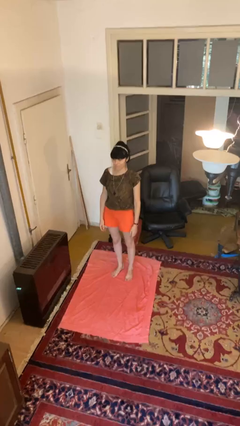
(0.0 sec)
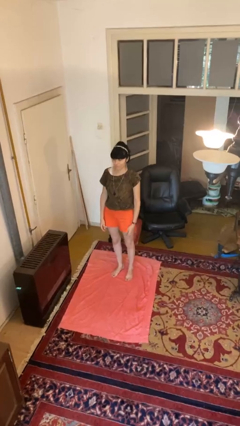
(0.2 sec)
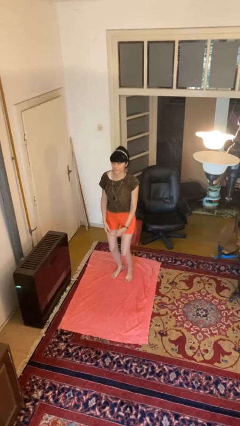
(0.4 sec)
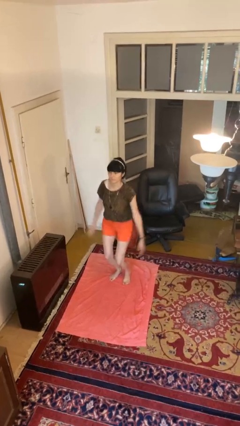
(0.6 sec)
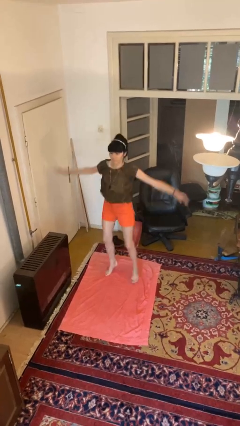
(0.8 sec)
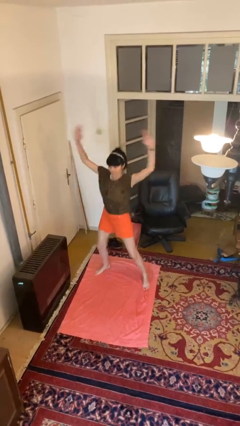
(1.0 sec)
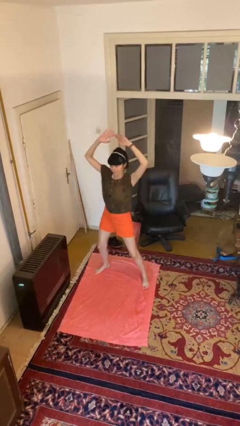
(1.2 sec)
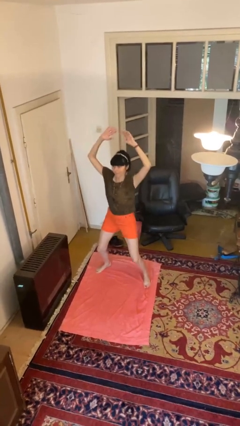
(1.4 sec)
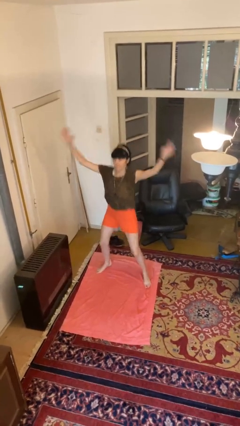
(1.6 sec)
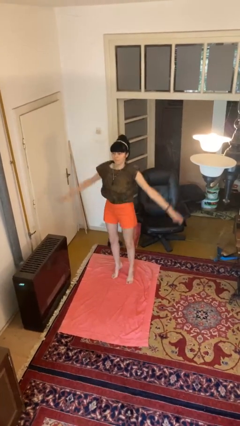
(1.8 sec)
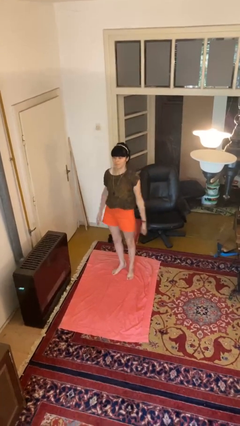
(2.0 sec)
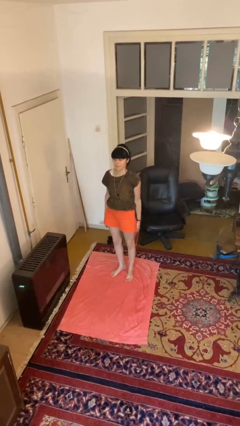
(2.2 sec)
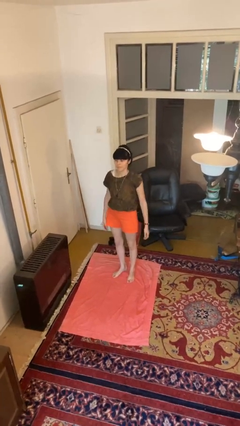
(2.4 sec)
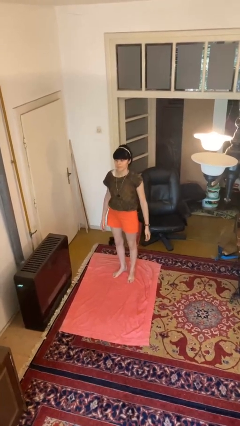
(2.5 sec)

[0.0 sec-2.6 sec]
person exercises with jumping jacks

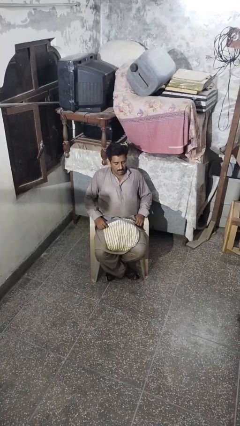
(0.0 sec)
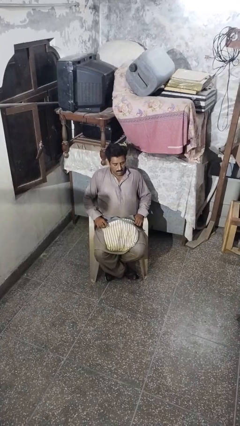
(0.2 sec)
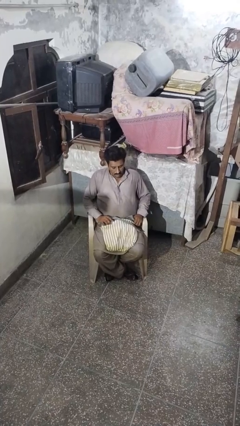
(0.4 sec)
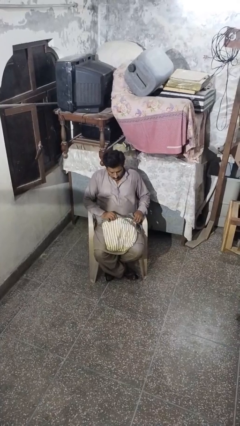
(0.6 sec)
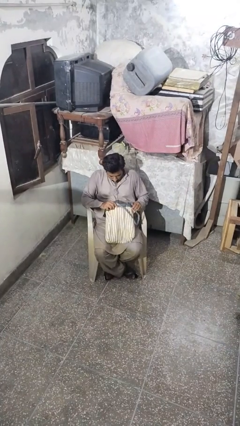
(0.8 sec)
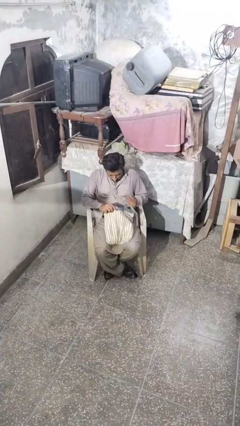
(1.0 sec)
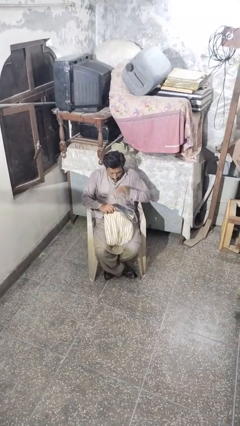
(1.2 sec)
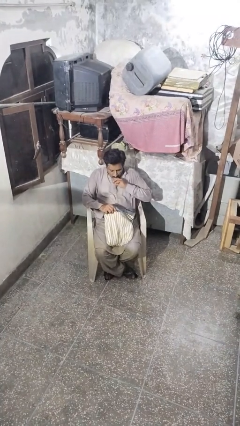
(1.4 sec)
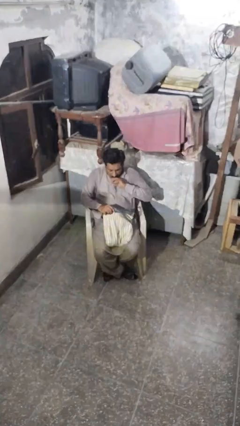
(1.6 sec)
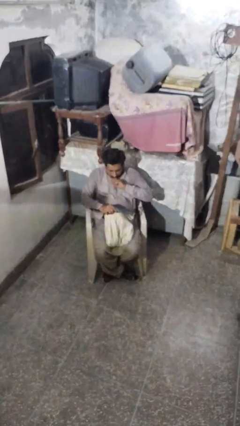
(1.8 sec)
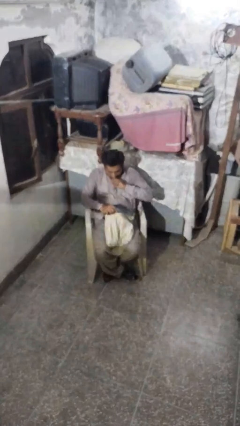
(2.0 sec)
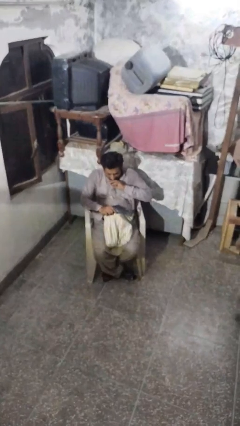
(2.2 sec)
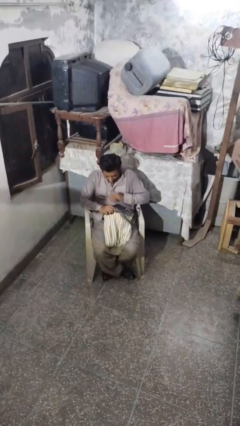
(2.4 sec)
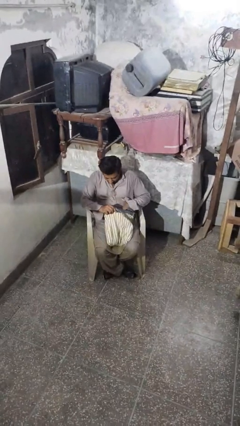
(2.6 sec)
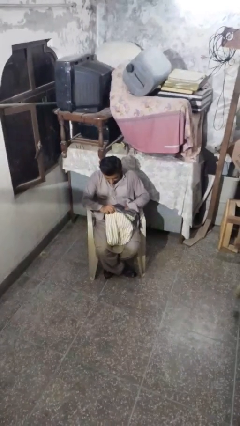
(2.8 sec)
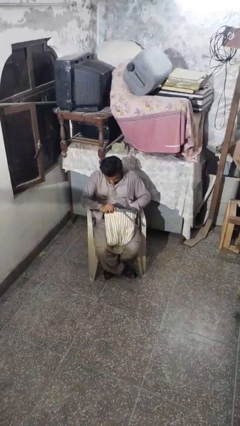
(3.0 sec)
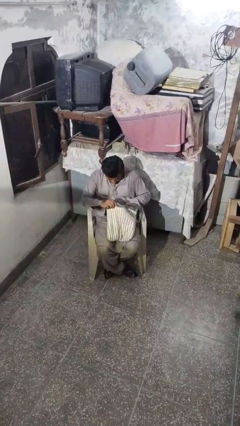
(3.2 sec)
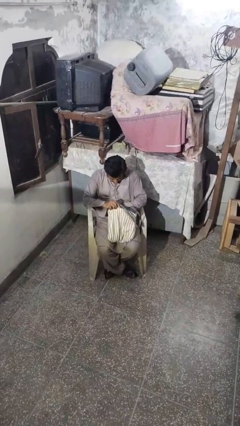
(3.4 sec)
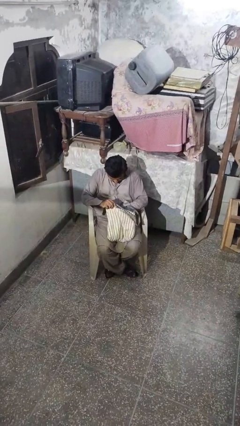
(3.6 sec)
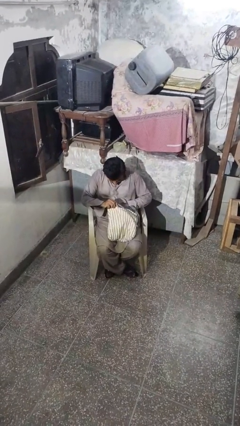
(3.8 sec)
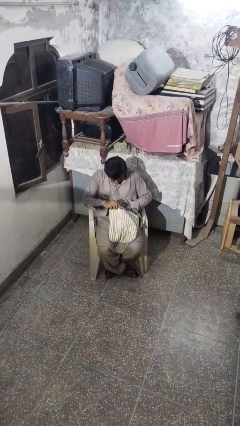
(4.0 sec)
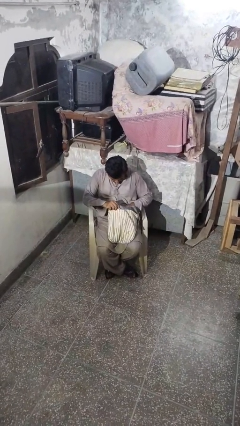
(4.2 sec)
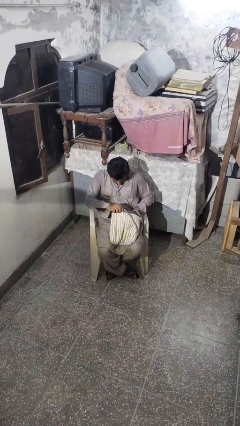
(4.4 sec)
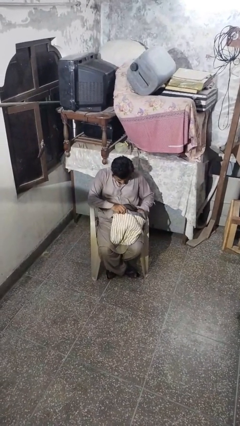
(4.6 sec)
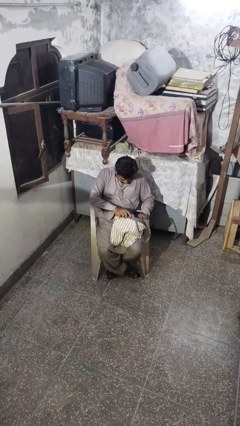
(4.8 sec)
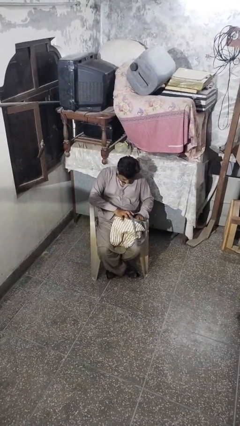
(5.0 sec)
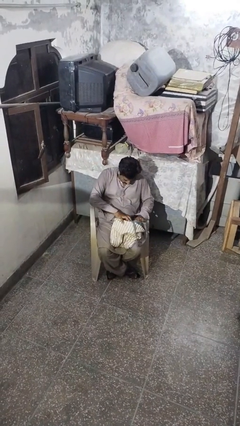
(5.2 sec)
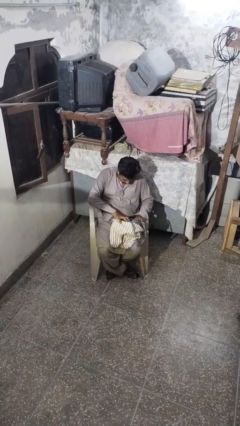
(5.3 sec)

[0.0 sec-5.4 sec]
person searches in backpack

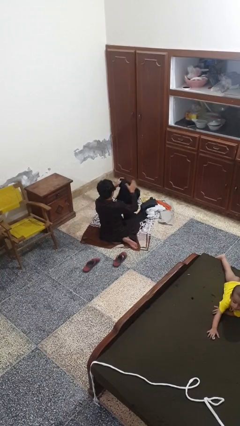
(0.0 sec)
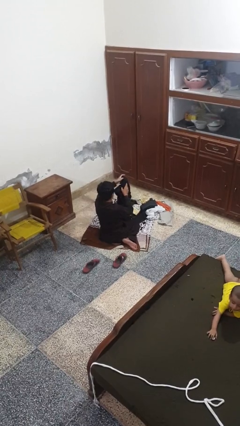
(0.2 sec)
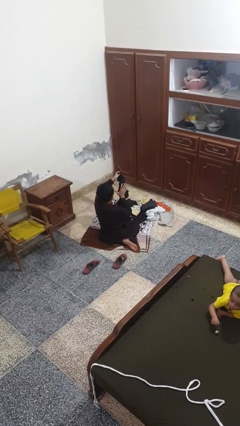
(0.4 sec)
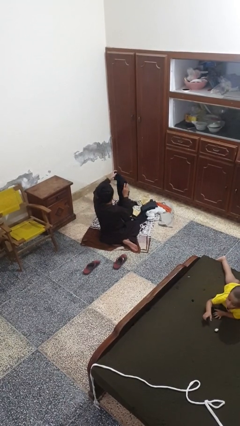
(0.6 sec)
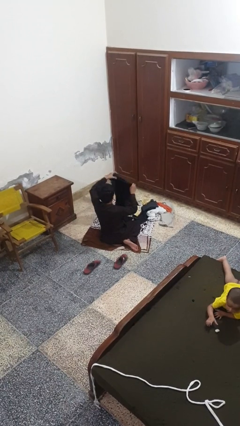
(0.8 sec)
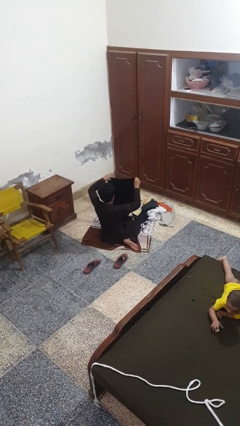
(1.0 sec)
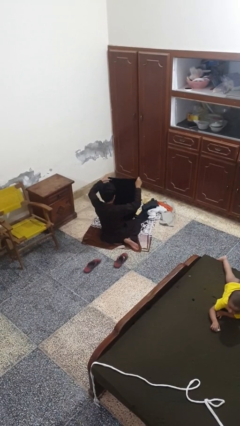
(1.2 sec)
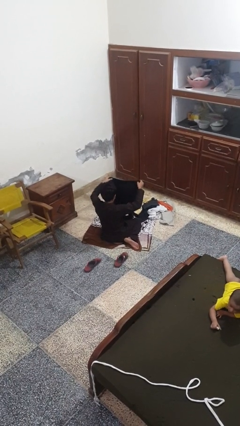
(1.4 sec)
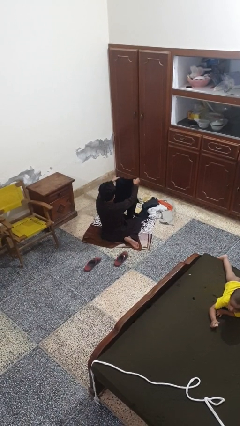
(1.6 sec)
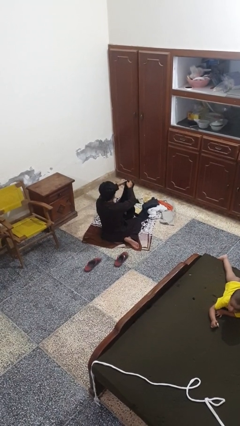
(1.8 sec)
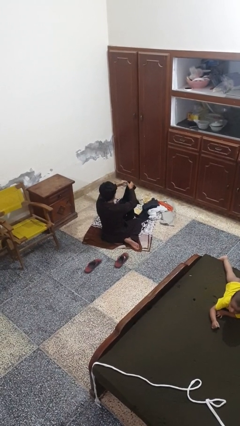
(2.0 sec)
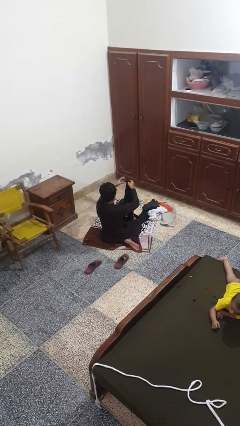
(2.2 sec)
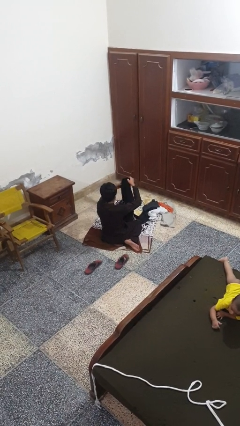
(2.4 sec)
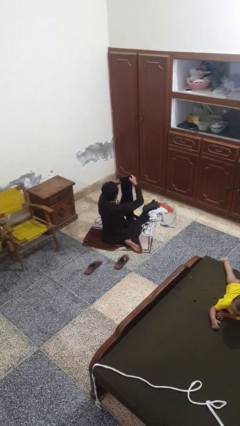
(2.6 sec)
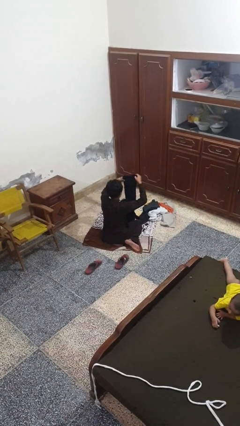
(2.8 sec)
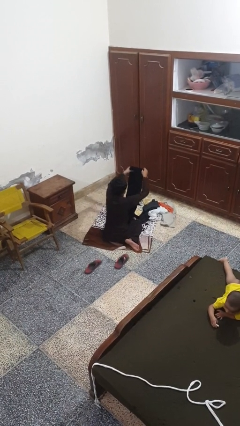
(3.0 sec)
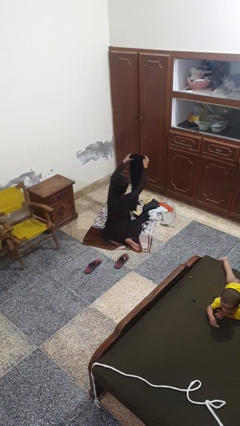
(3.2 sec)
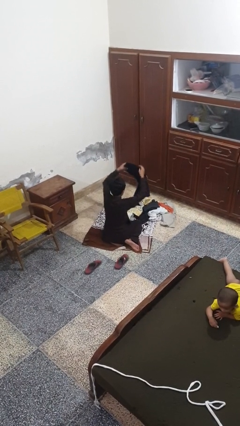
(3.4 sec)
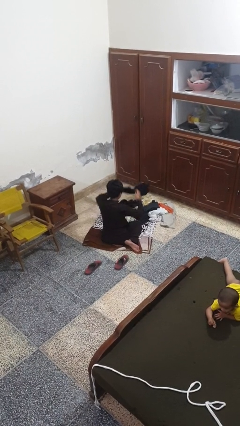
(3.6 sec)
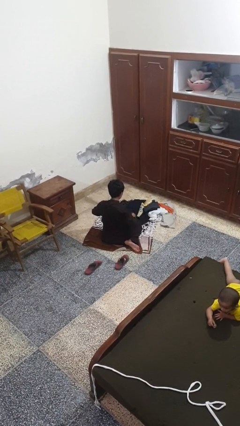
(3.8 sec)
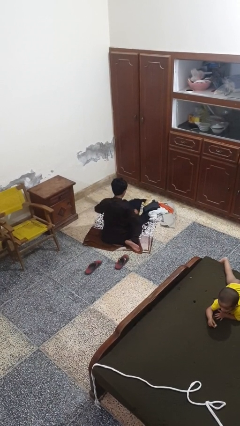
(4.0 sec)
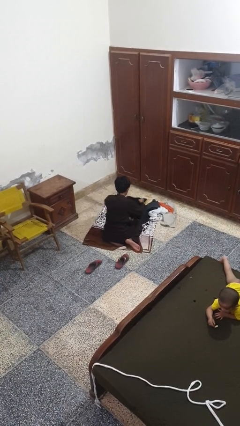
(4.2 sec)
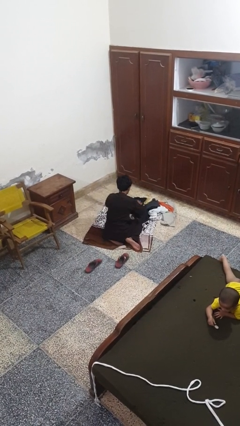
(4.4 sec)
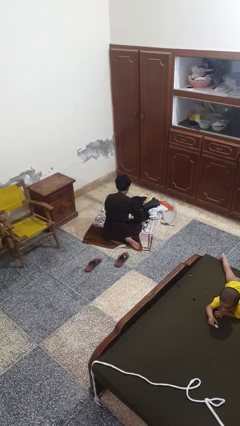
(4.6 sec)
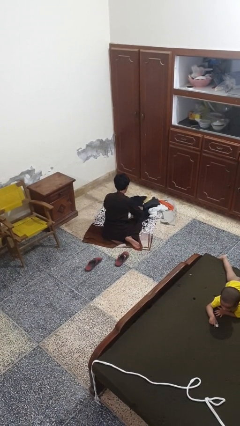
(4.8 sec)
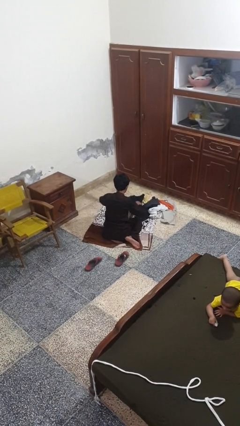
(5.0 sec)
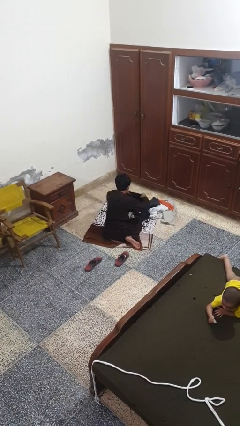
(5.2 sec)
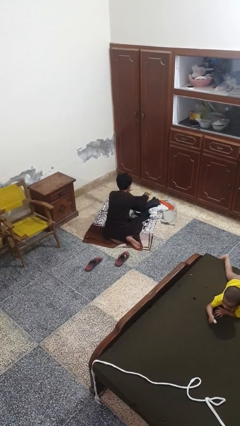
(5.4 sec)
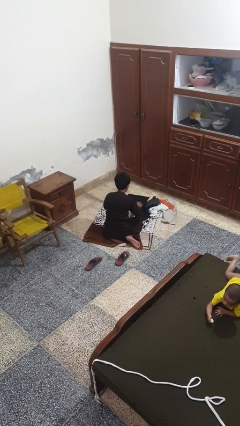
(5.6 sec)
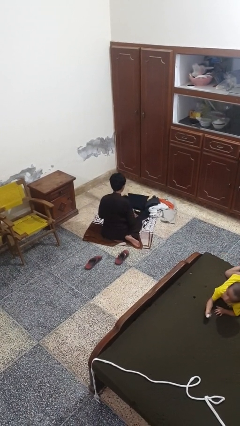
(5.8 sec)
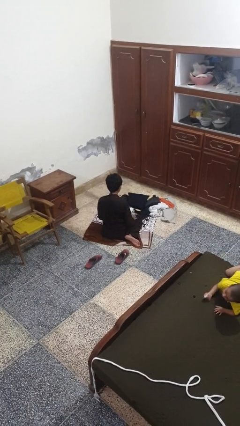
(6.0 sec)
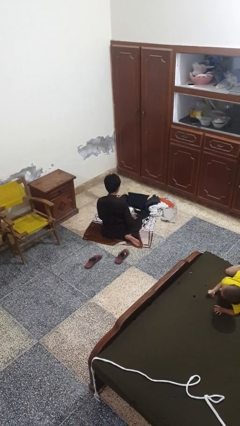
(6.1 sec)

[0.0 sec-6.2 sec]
person folds pants

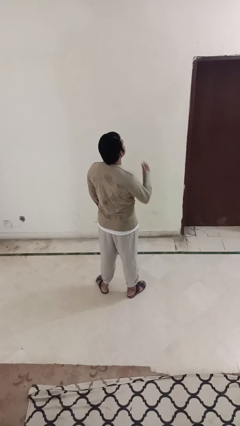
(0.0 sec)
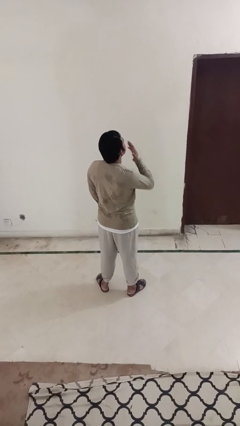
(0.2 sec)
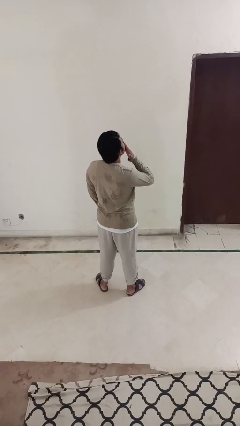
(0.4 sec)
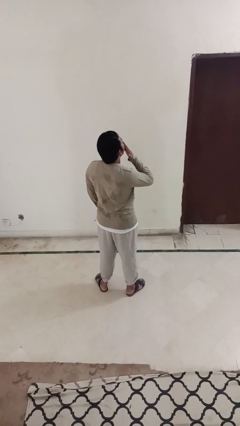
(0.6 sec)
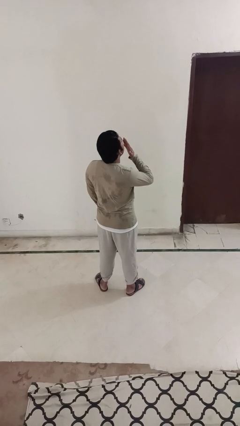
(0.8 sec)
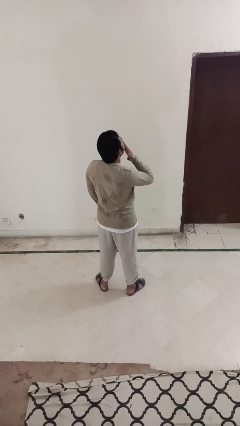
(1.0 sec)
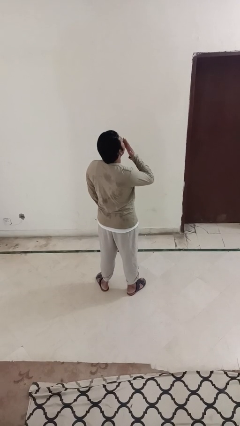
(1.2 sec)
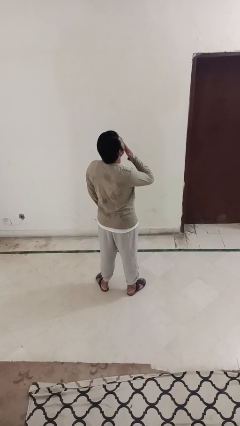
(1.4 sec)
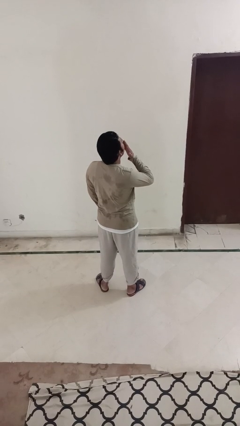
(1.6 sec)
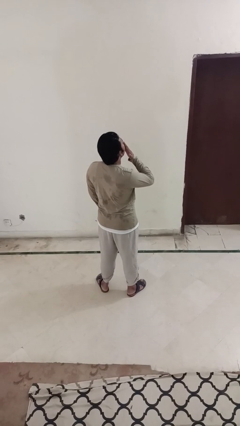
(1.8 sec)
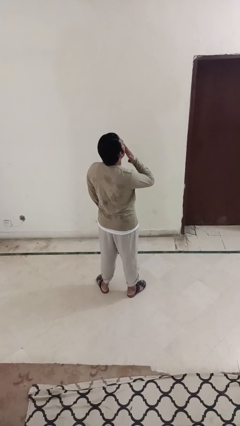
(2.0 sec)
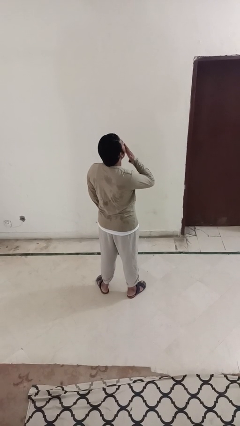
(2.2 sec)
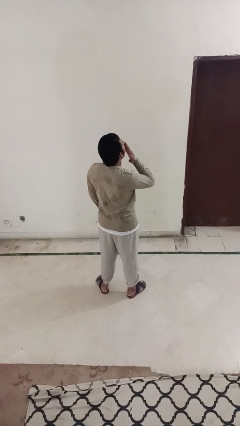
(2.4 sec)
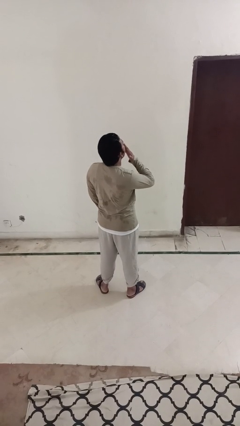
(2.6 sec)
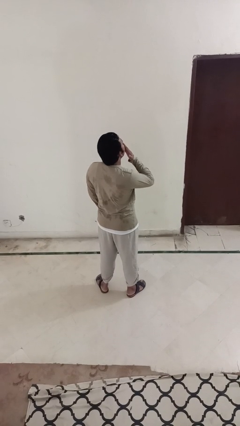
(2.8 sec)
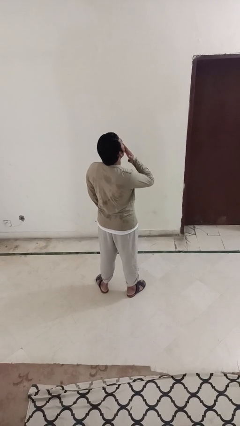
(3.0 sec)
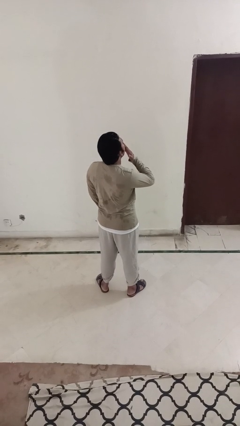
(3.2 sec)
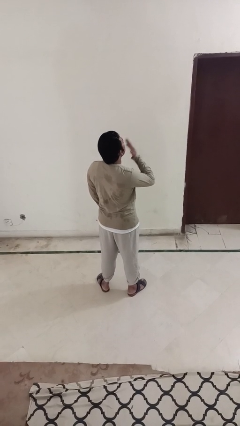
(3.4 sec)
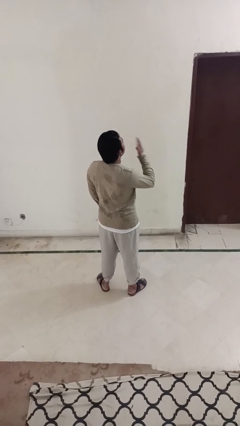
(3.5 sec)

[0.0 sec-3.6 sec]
person yawns
